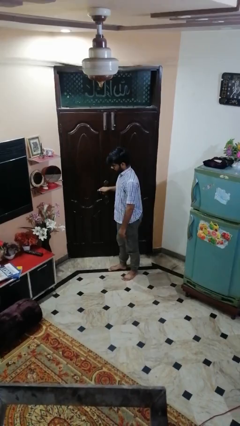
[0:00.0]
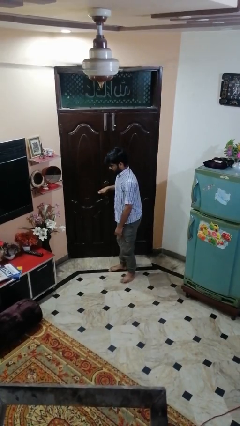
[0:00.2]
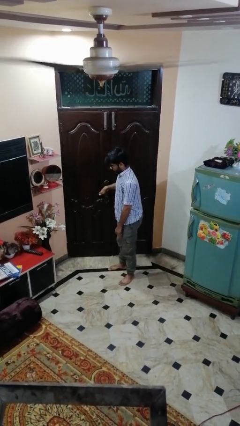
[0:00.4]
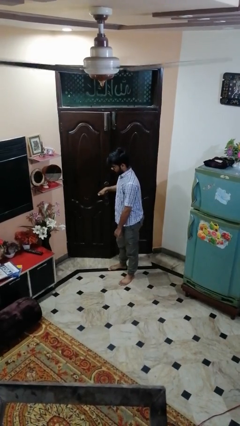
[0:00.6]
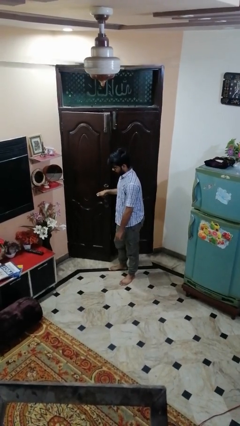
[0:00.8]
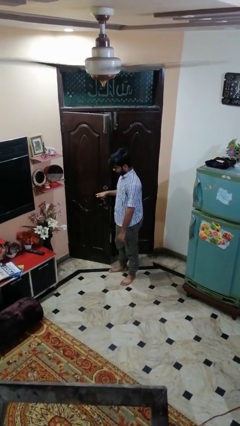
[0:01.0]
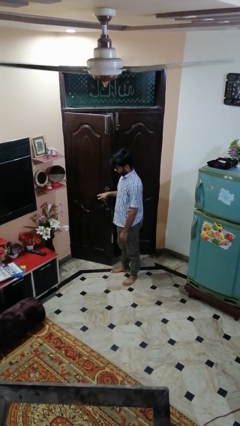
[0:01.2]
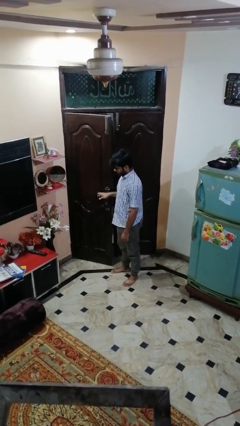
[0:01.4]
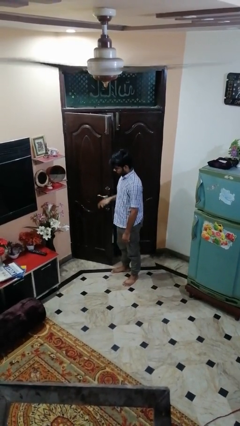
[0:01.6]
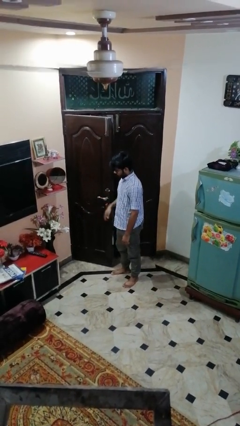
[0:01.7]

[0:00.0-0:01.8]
person opens facility door

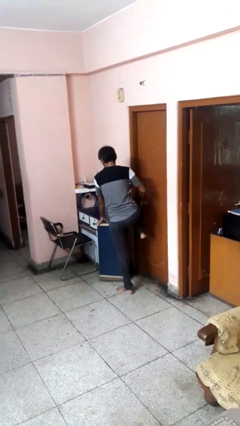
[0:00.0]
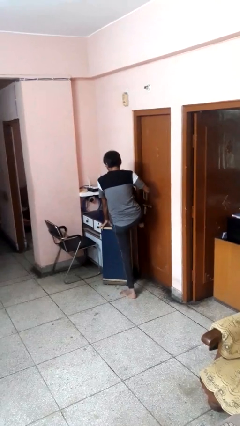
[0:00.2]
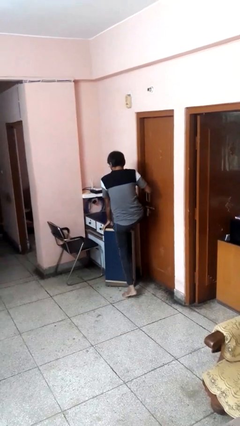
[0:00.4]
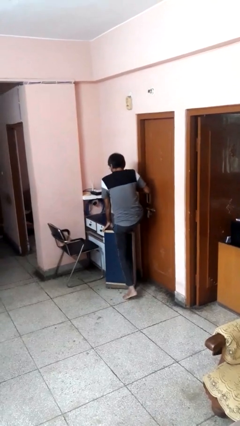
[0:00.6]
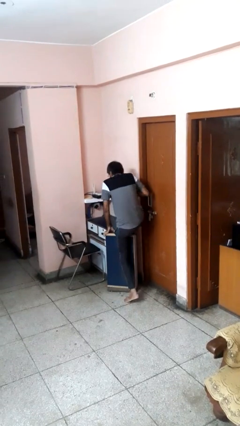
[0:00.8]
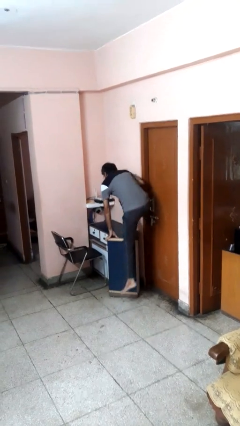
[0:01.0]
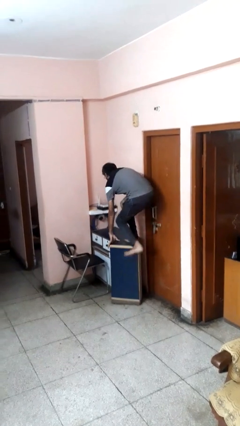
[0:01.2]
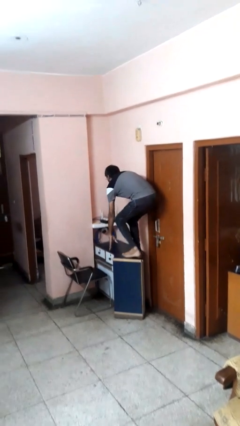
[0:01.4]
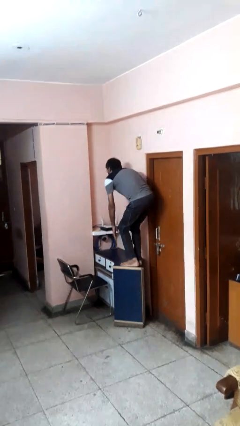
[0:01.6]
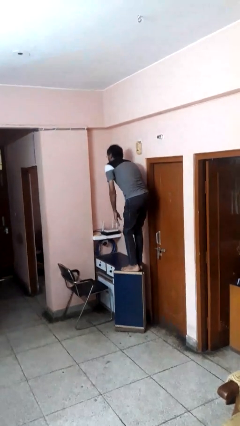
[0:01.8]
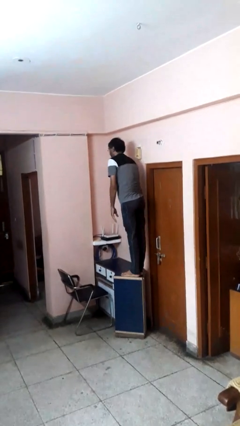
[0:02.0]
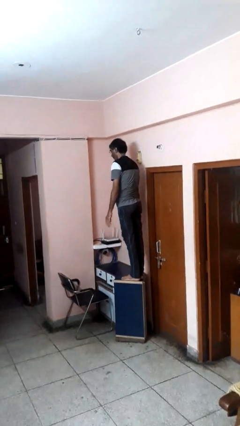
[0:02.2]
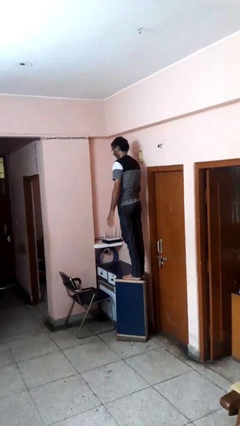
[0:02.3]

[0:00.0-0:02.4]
person climbs on table

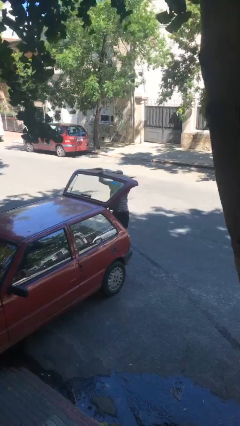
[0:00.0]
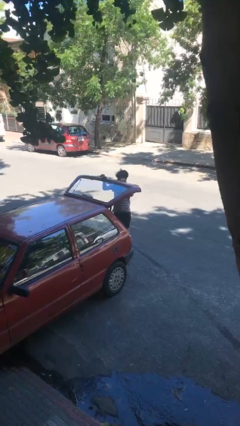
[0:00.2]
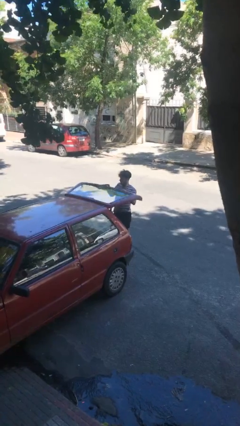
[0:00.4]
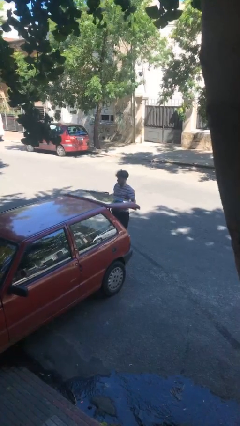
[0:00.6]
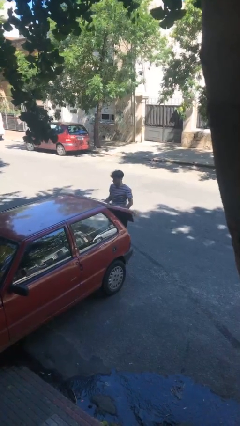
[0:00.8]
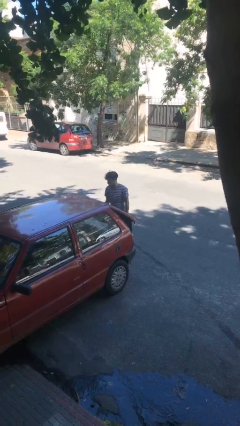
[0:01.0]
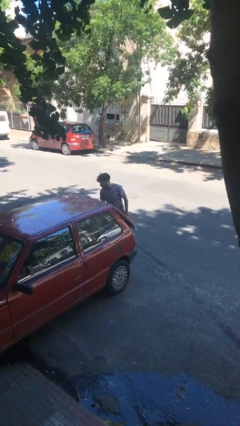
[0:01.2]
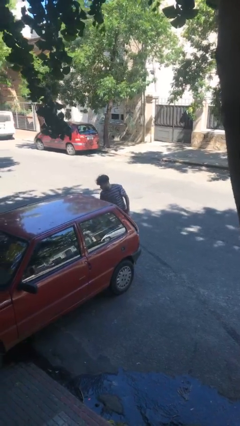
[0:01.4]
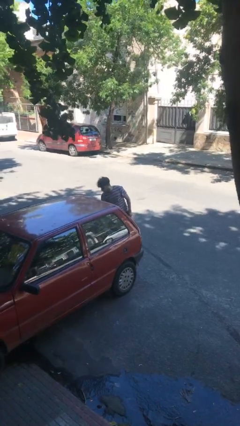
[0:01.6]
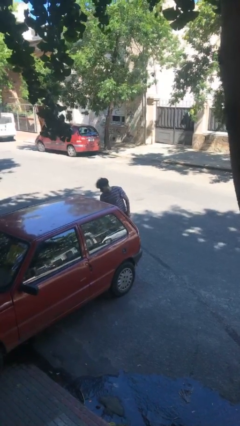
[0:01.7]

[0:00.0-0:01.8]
person closes car trunk

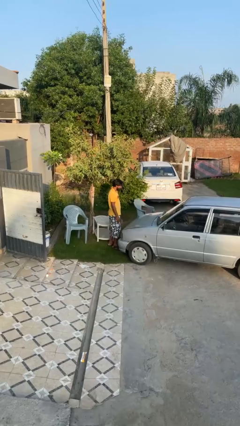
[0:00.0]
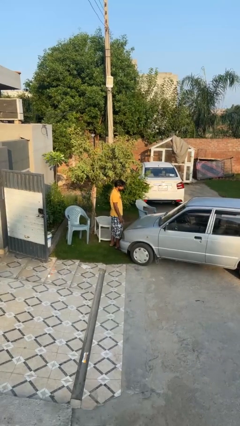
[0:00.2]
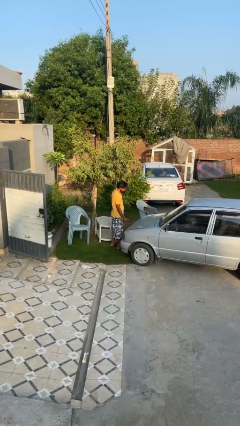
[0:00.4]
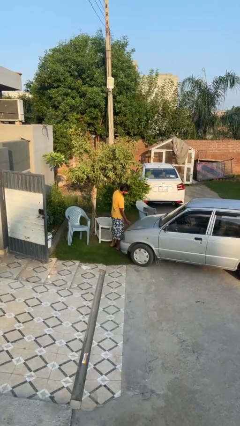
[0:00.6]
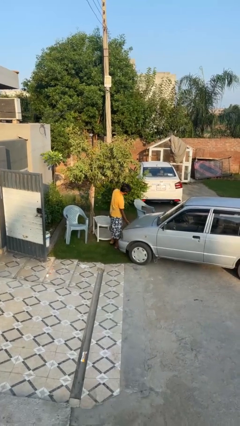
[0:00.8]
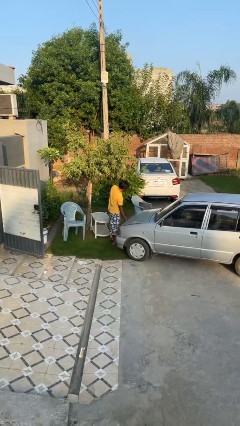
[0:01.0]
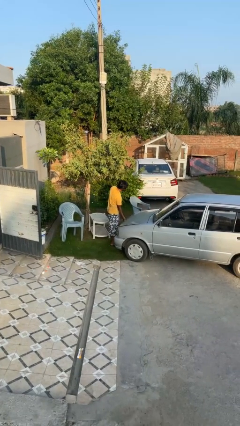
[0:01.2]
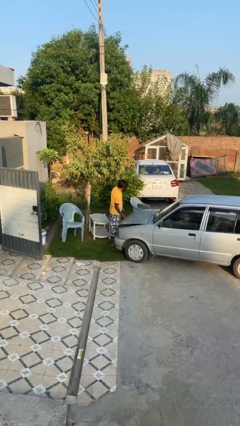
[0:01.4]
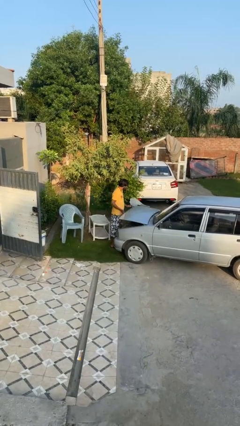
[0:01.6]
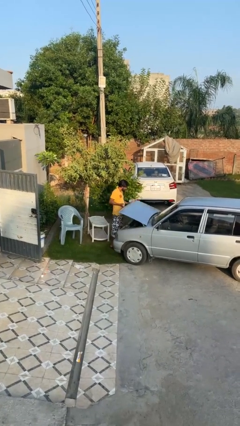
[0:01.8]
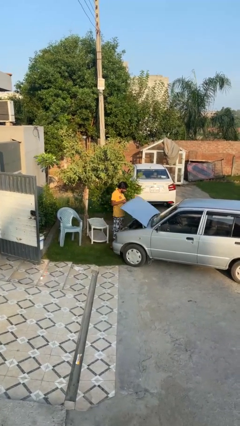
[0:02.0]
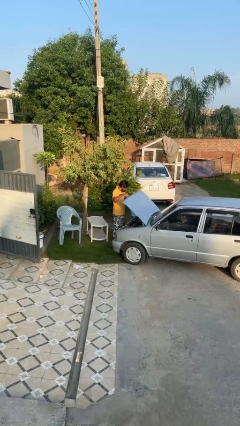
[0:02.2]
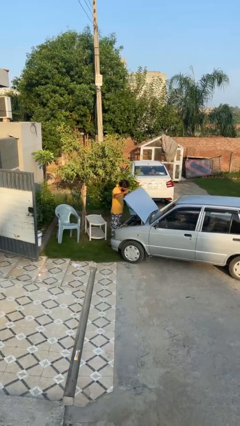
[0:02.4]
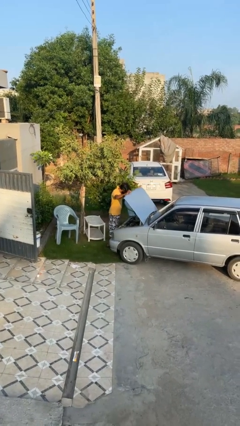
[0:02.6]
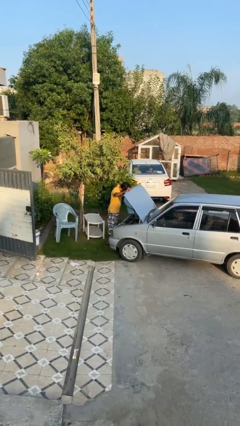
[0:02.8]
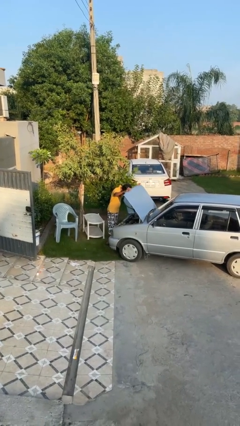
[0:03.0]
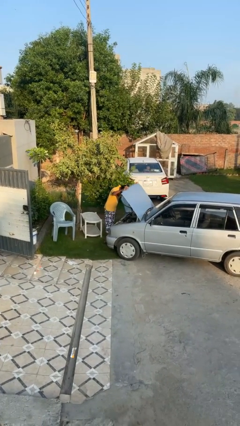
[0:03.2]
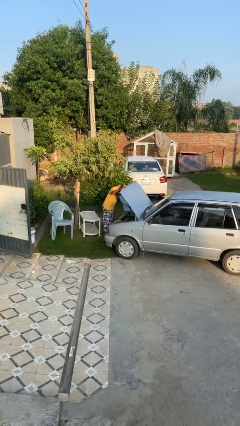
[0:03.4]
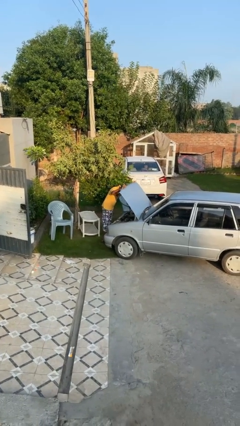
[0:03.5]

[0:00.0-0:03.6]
person opens car hood

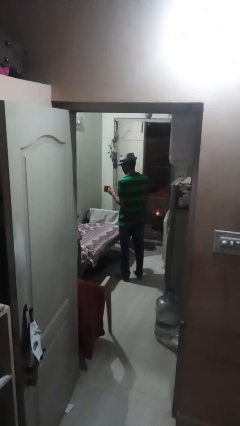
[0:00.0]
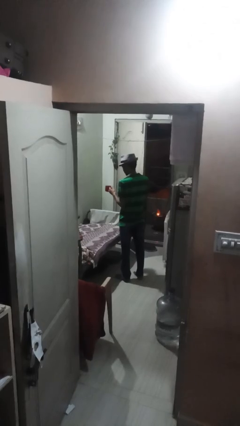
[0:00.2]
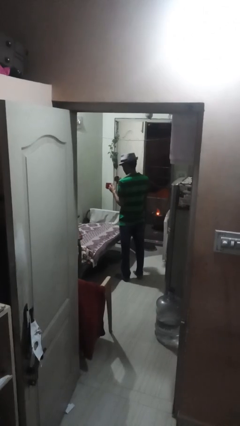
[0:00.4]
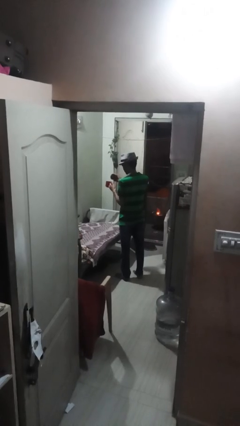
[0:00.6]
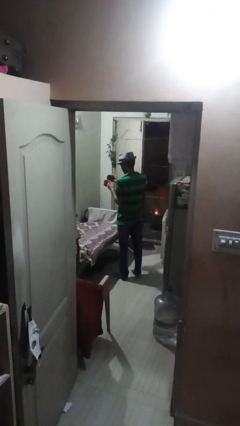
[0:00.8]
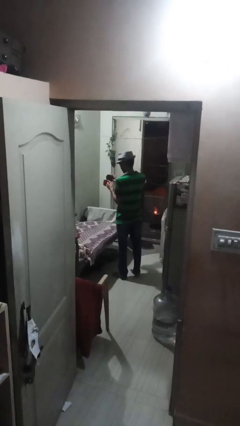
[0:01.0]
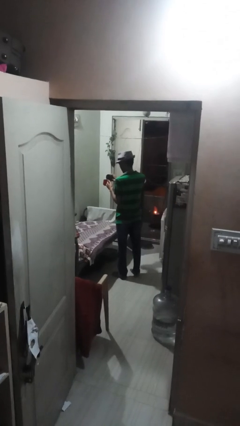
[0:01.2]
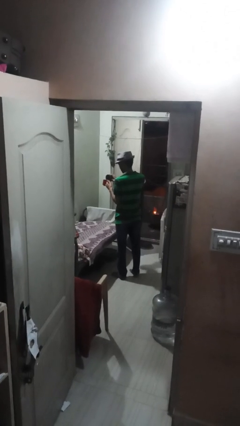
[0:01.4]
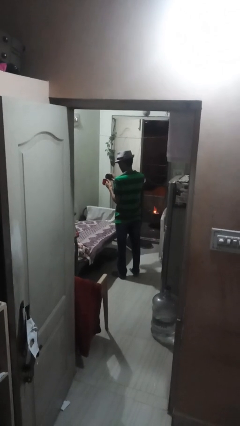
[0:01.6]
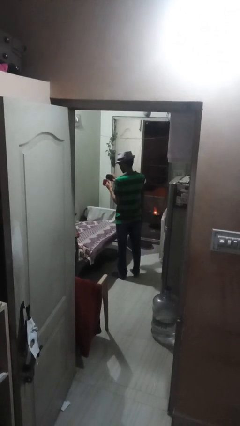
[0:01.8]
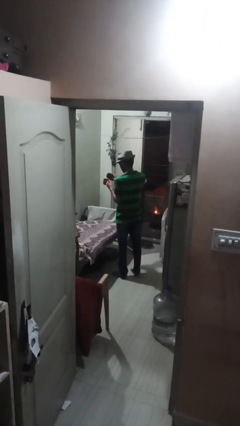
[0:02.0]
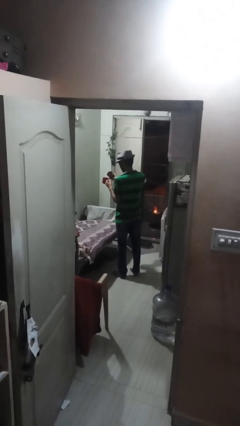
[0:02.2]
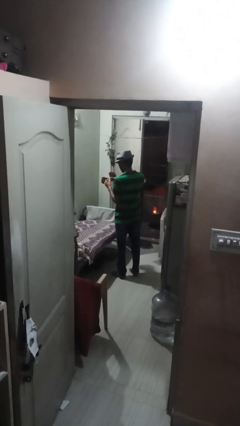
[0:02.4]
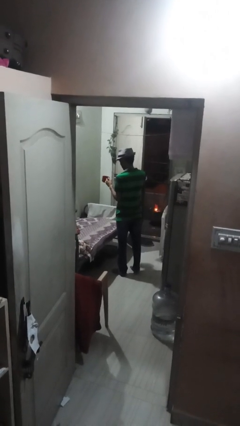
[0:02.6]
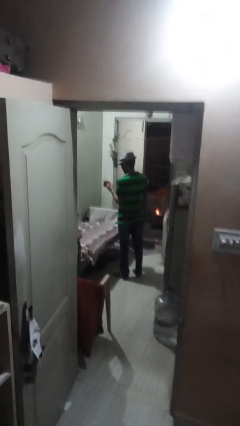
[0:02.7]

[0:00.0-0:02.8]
person pours coffee into mug

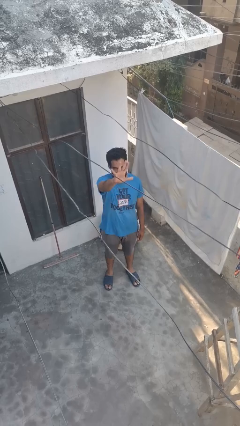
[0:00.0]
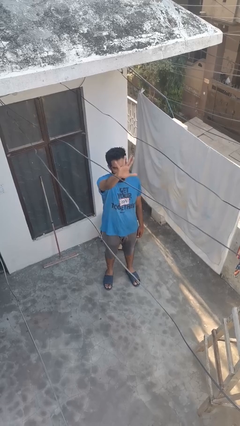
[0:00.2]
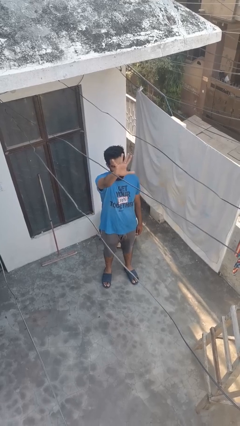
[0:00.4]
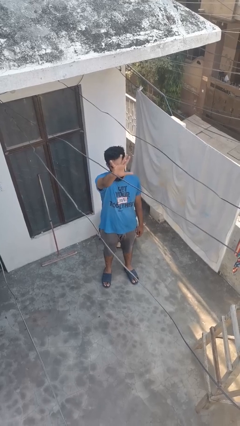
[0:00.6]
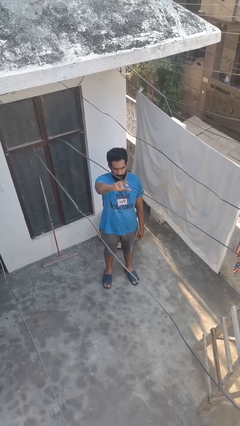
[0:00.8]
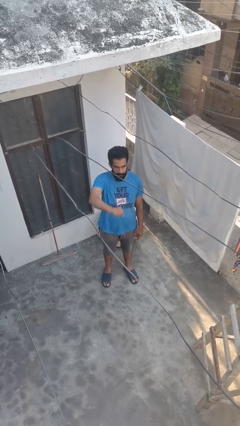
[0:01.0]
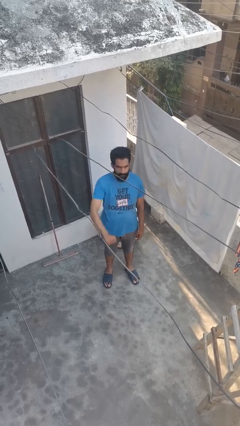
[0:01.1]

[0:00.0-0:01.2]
person gestures number five

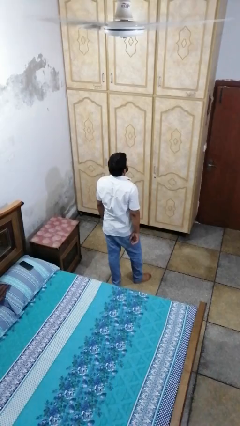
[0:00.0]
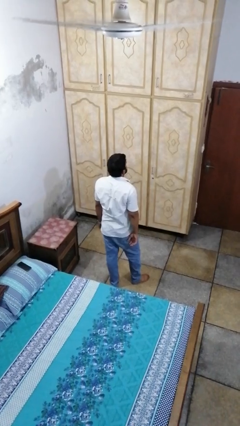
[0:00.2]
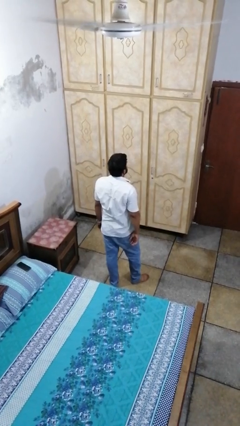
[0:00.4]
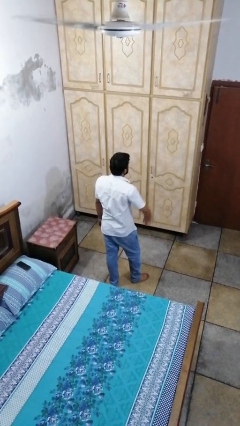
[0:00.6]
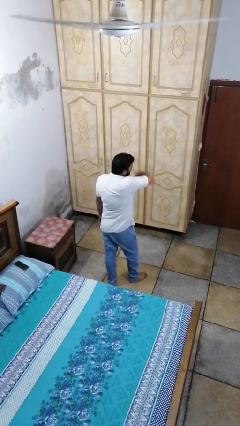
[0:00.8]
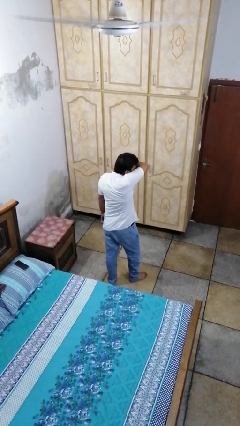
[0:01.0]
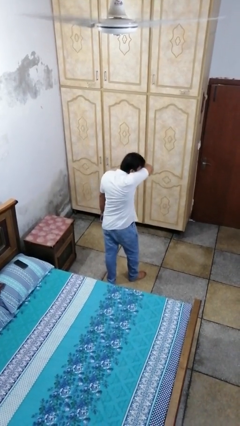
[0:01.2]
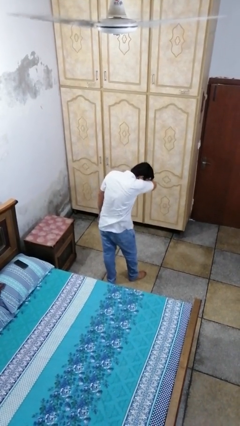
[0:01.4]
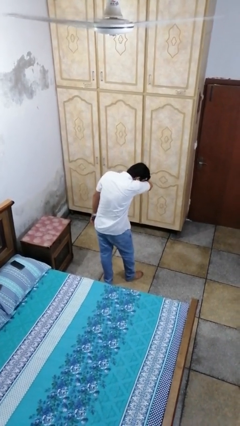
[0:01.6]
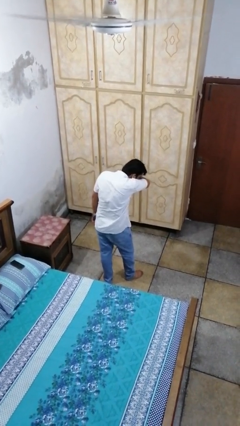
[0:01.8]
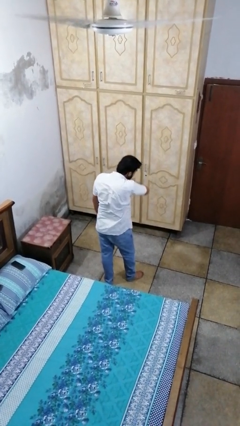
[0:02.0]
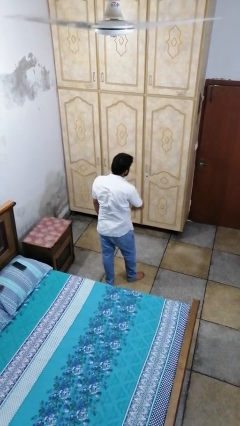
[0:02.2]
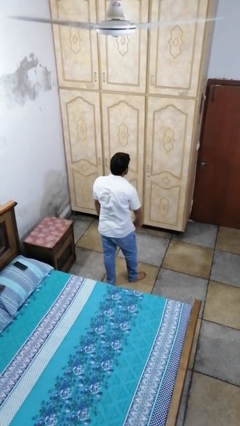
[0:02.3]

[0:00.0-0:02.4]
person sneezes into arm

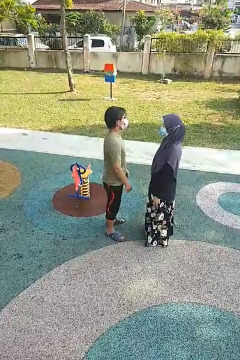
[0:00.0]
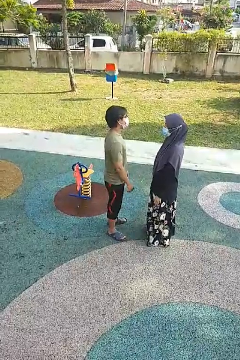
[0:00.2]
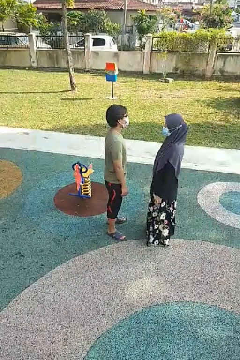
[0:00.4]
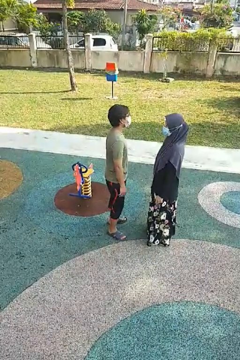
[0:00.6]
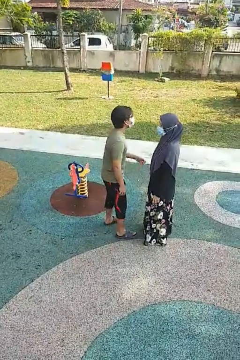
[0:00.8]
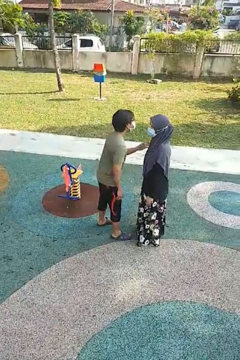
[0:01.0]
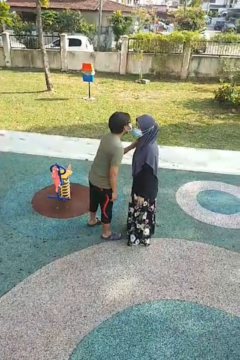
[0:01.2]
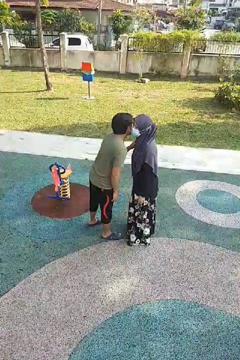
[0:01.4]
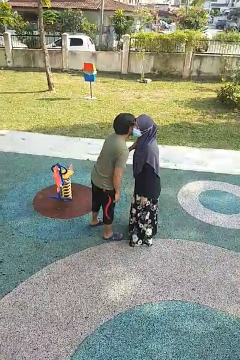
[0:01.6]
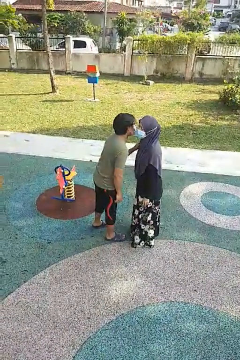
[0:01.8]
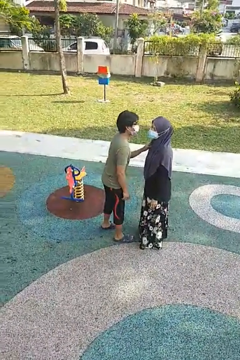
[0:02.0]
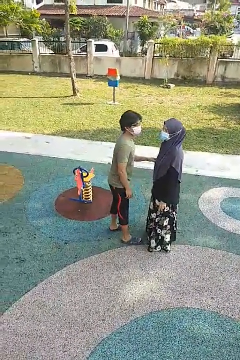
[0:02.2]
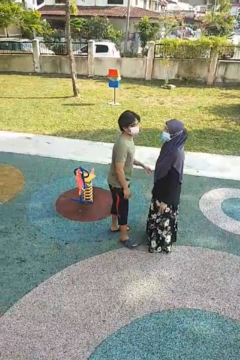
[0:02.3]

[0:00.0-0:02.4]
person kisses cheek of person
